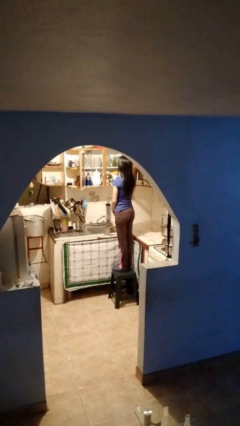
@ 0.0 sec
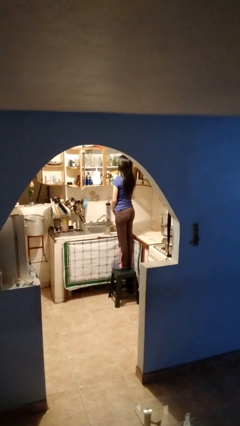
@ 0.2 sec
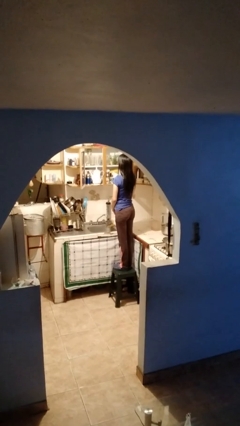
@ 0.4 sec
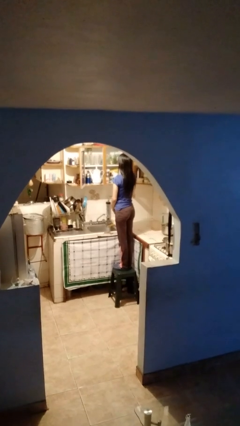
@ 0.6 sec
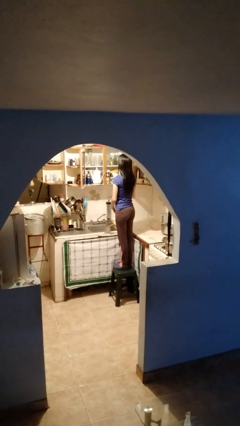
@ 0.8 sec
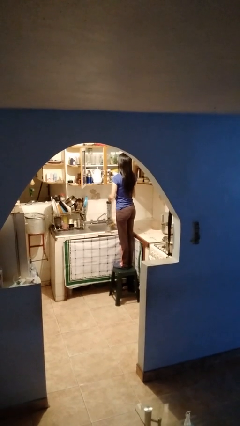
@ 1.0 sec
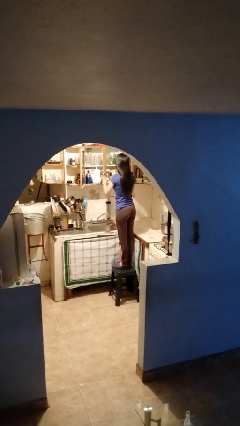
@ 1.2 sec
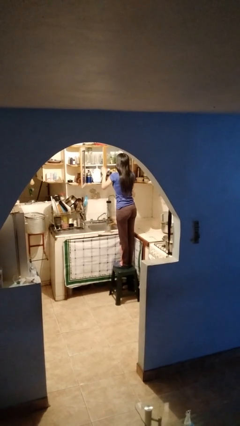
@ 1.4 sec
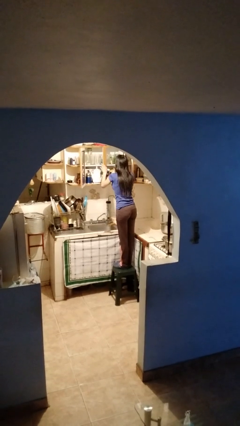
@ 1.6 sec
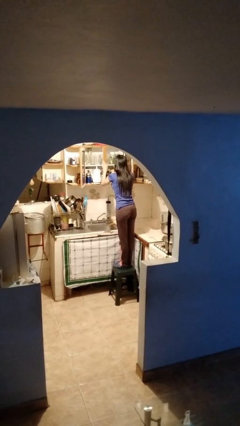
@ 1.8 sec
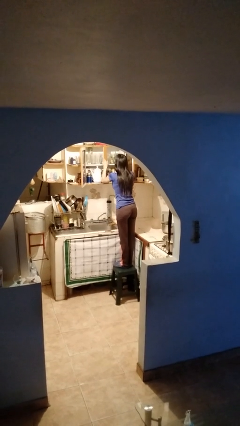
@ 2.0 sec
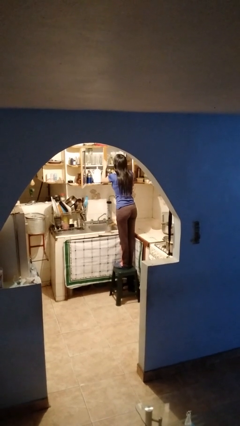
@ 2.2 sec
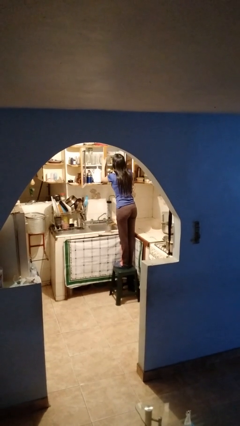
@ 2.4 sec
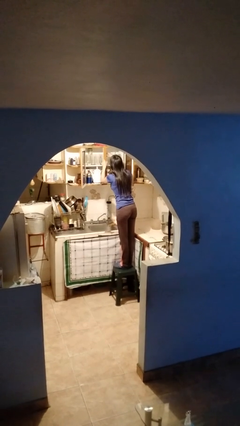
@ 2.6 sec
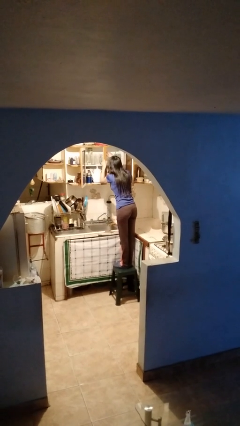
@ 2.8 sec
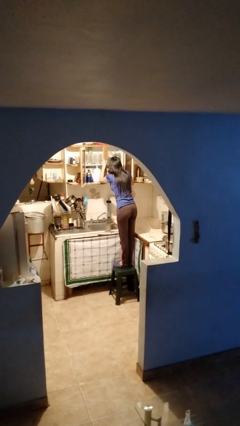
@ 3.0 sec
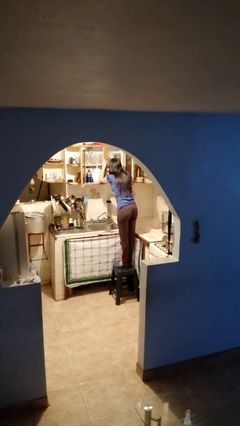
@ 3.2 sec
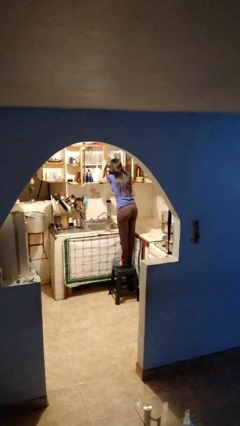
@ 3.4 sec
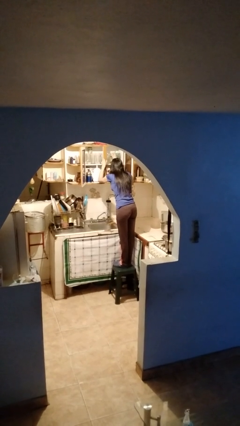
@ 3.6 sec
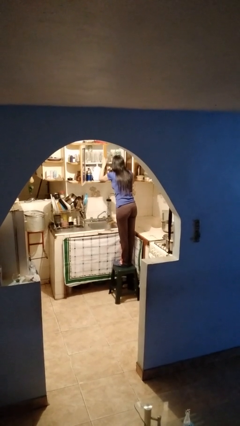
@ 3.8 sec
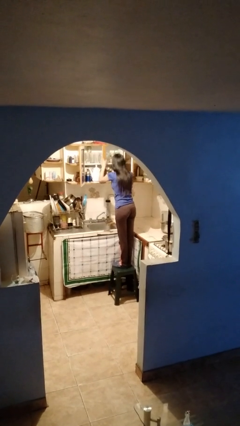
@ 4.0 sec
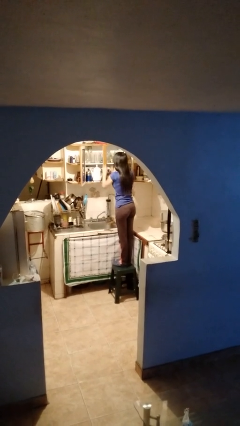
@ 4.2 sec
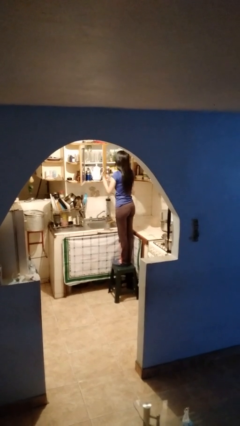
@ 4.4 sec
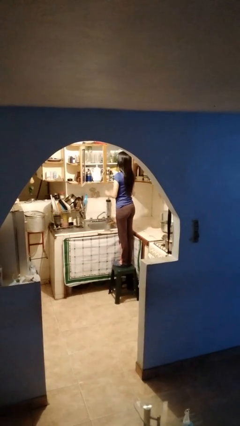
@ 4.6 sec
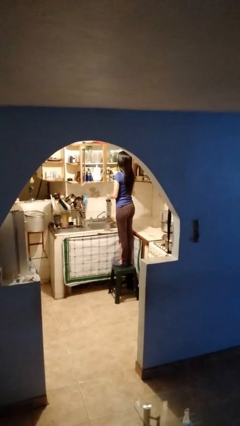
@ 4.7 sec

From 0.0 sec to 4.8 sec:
person searches in cabinet

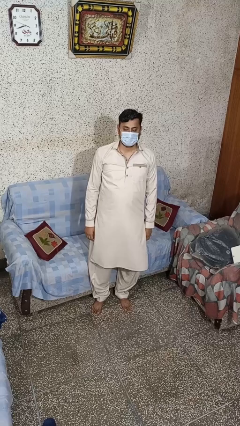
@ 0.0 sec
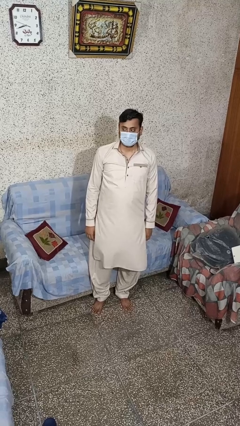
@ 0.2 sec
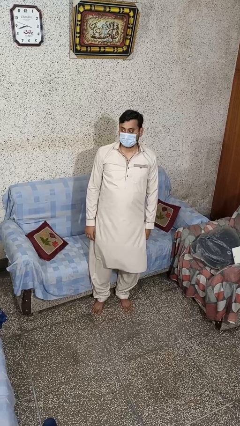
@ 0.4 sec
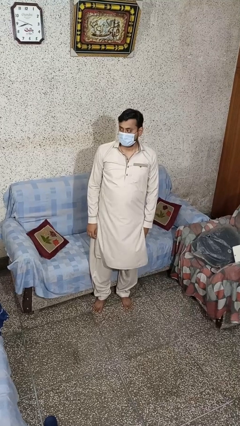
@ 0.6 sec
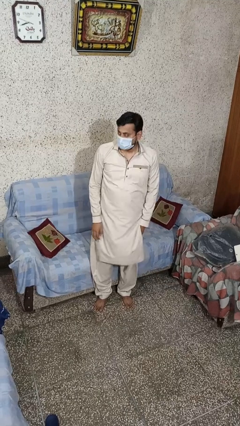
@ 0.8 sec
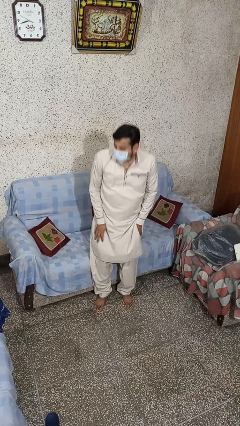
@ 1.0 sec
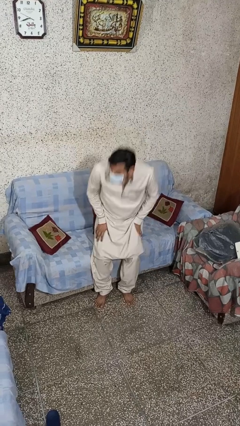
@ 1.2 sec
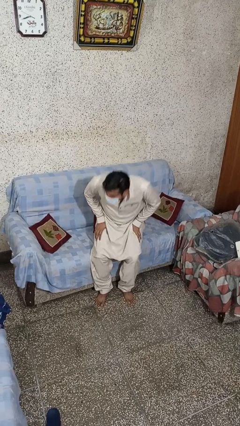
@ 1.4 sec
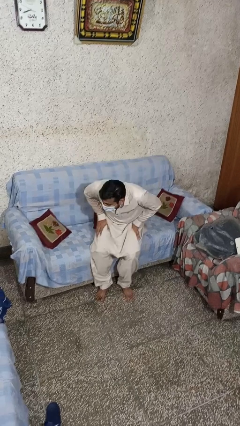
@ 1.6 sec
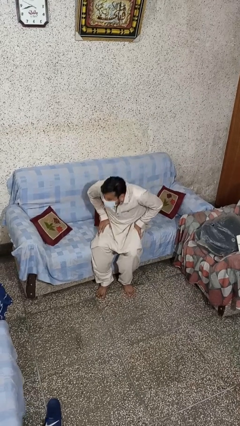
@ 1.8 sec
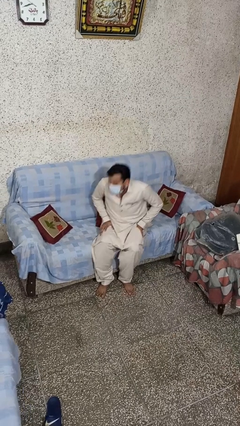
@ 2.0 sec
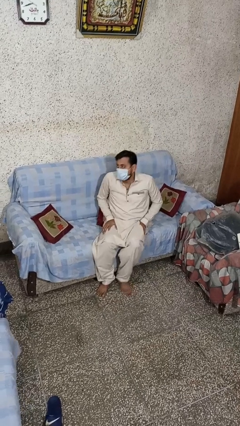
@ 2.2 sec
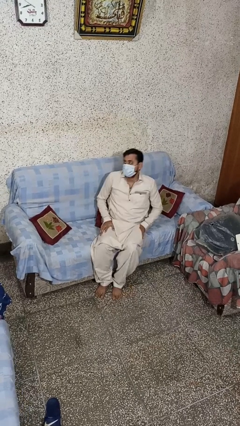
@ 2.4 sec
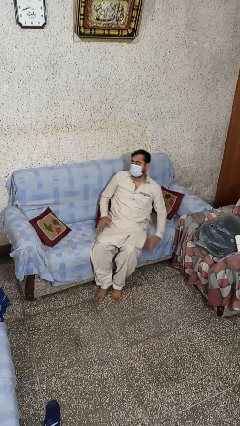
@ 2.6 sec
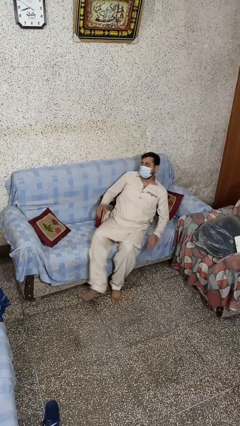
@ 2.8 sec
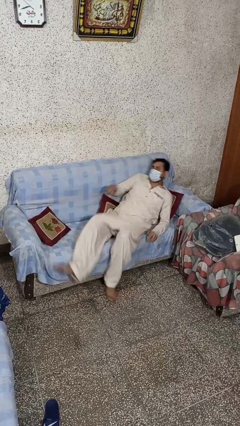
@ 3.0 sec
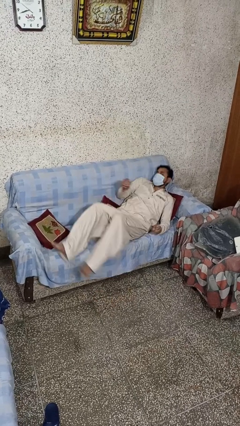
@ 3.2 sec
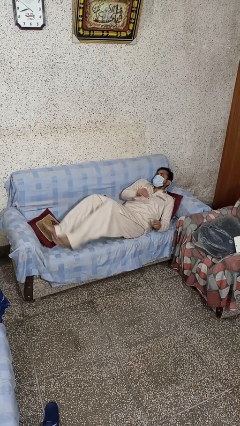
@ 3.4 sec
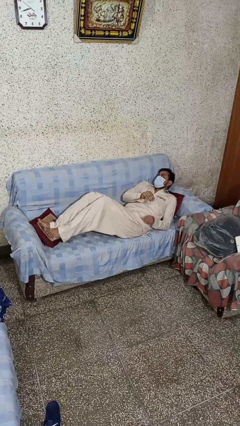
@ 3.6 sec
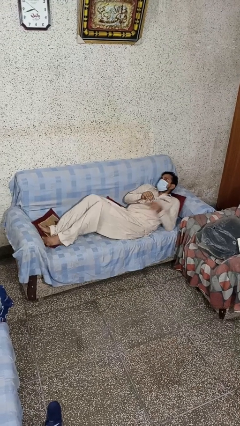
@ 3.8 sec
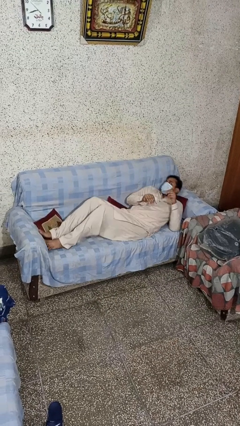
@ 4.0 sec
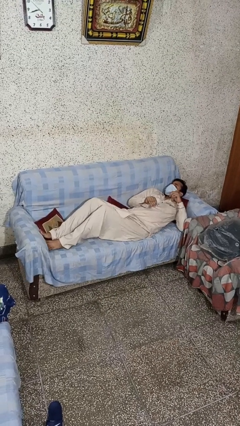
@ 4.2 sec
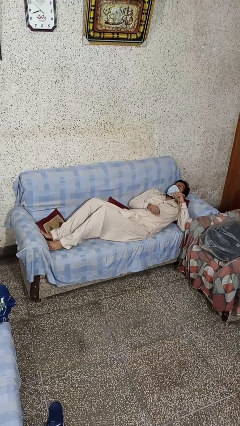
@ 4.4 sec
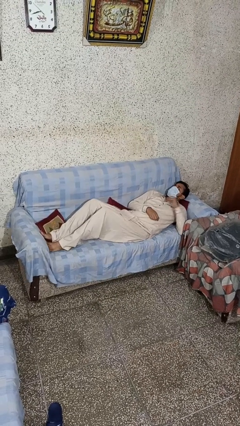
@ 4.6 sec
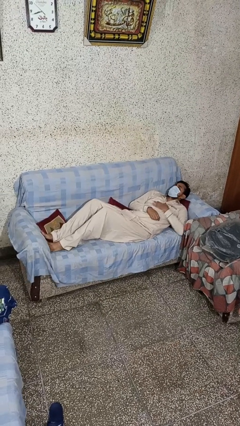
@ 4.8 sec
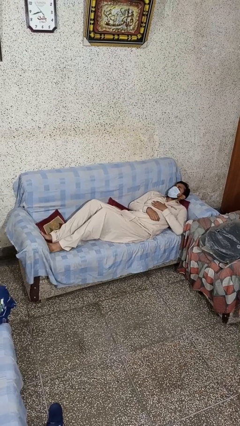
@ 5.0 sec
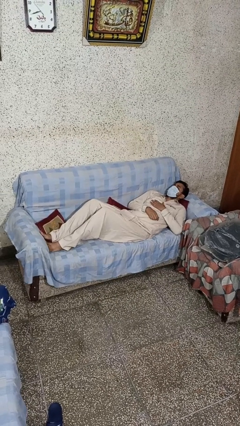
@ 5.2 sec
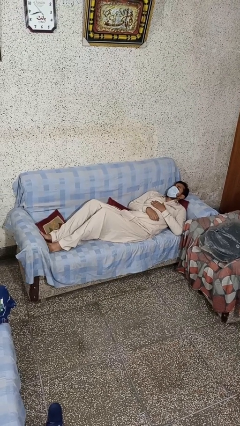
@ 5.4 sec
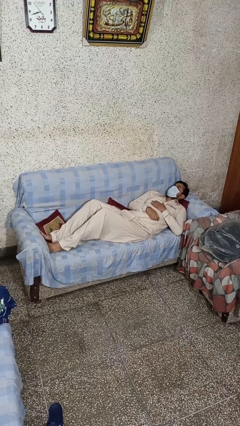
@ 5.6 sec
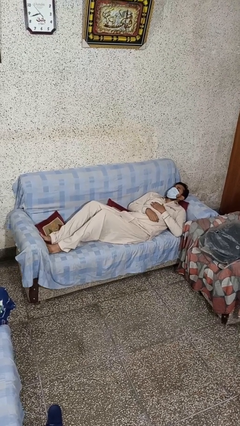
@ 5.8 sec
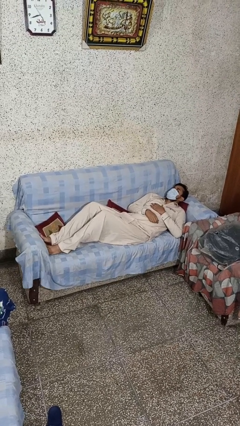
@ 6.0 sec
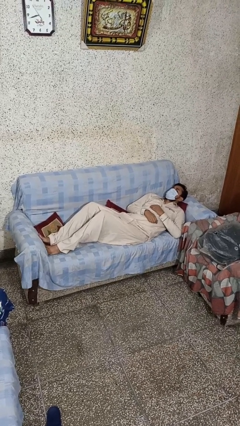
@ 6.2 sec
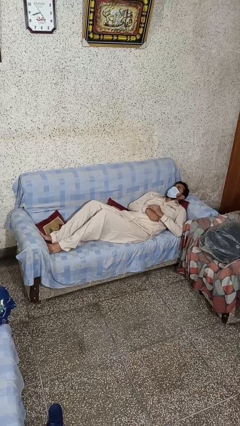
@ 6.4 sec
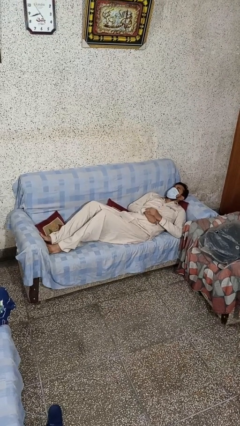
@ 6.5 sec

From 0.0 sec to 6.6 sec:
person lies down on couch

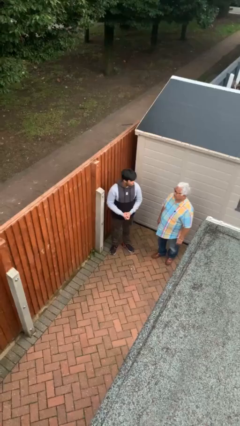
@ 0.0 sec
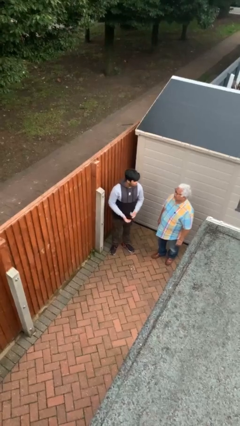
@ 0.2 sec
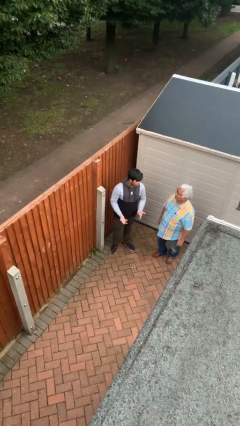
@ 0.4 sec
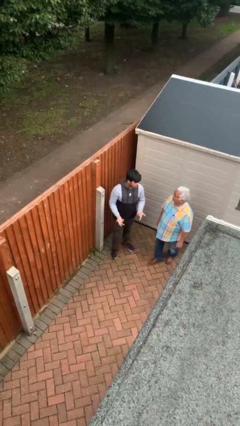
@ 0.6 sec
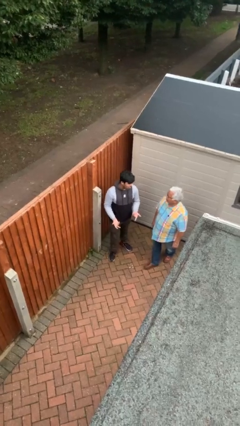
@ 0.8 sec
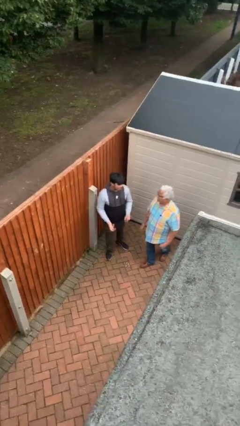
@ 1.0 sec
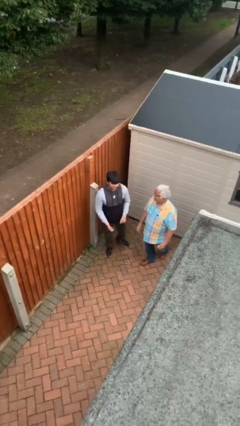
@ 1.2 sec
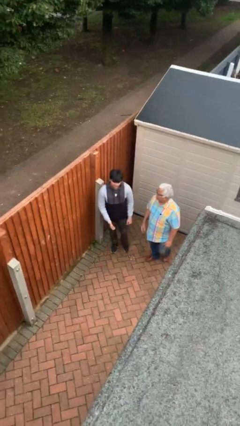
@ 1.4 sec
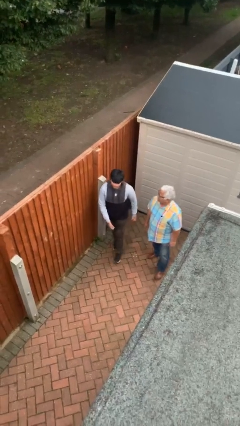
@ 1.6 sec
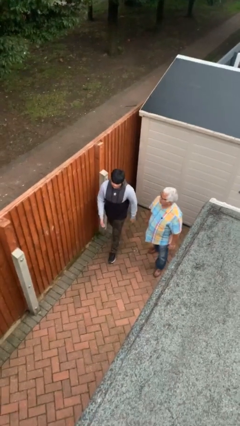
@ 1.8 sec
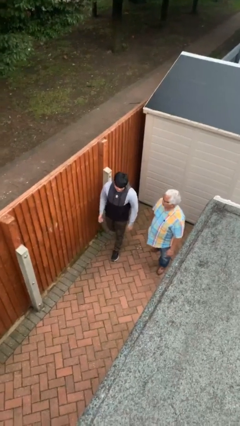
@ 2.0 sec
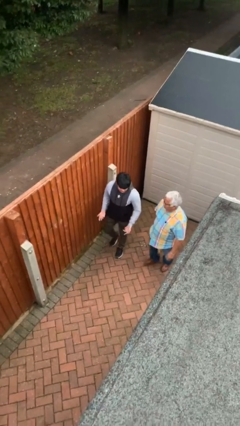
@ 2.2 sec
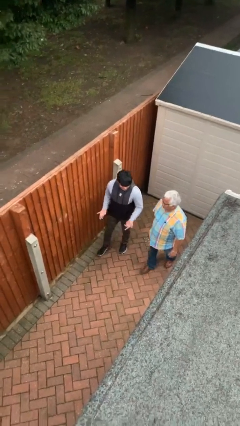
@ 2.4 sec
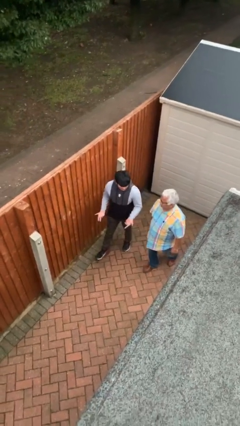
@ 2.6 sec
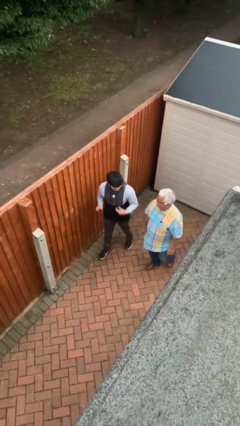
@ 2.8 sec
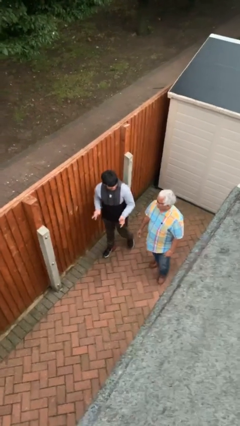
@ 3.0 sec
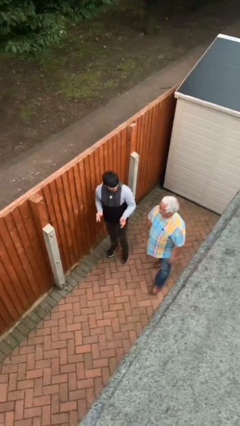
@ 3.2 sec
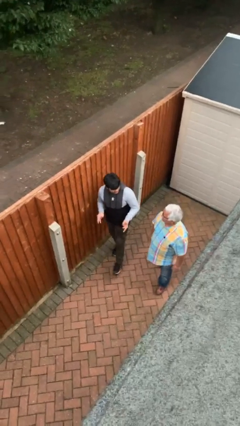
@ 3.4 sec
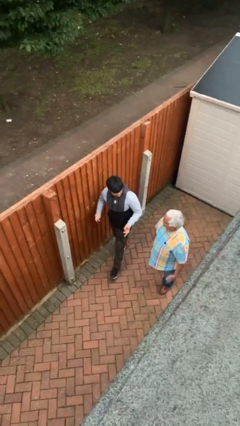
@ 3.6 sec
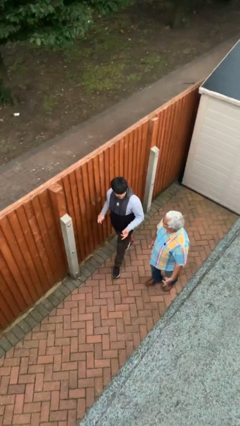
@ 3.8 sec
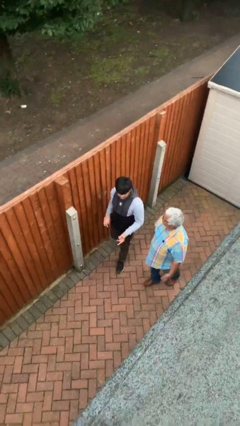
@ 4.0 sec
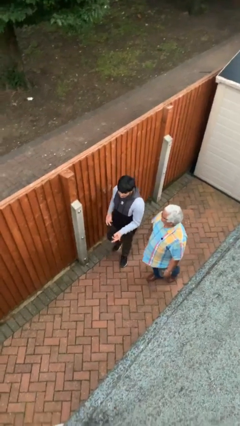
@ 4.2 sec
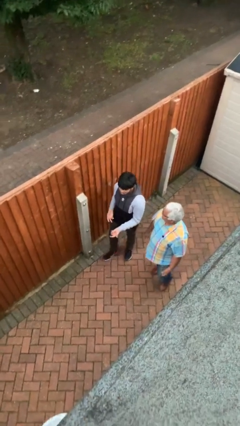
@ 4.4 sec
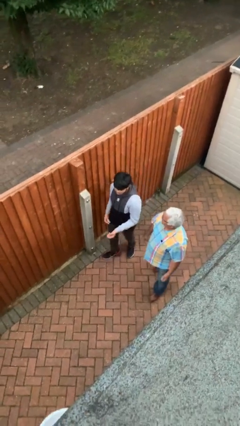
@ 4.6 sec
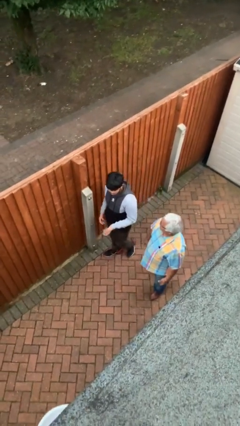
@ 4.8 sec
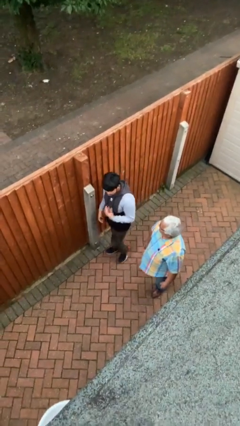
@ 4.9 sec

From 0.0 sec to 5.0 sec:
person talks to person

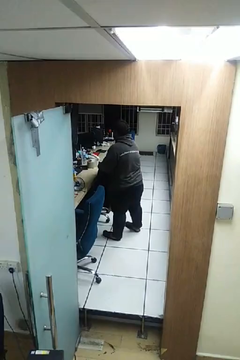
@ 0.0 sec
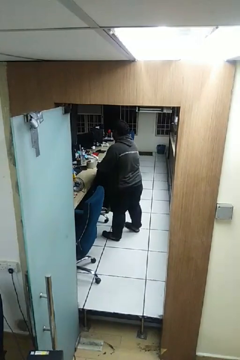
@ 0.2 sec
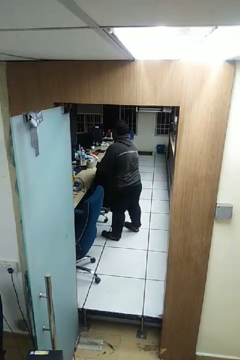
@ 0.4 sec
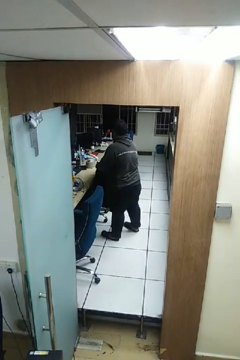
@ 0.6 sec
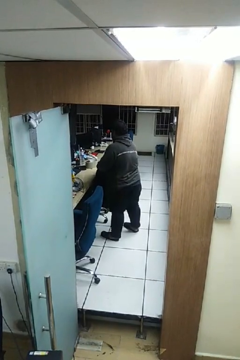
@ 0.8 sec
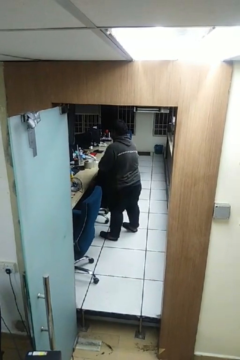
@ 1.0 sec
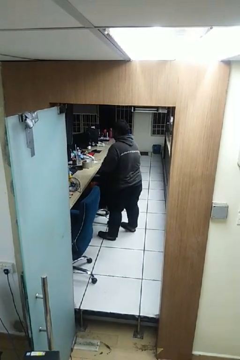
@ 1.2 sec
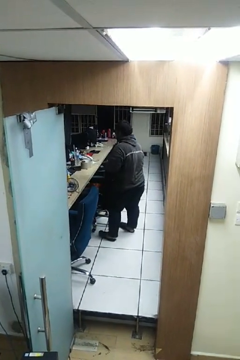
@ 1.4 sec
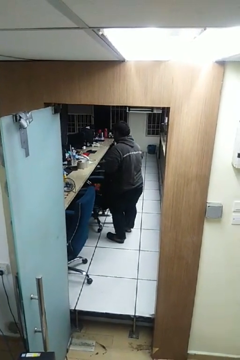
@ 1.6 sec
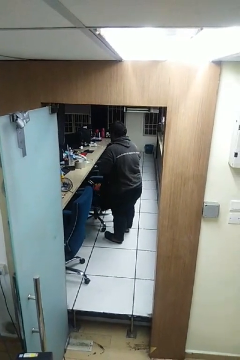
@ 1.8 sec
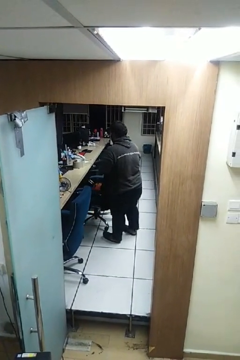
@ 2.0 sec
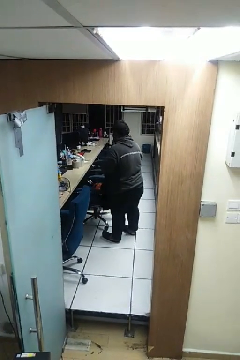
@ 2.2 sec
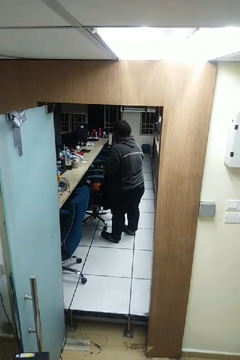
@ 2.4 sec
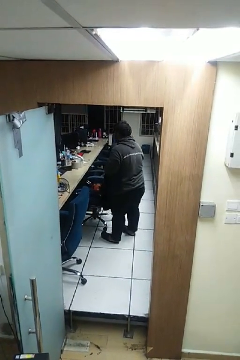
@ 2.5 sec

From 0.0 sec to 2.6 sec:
person pulls out chair
